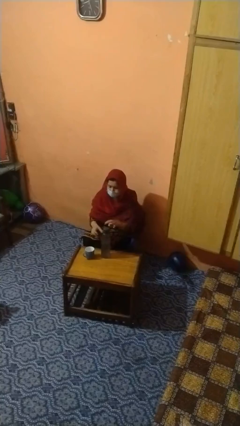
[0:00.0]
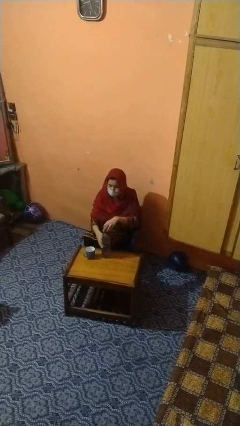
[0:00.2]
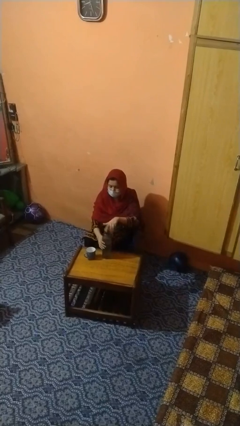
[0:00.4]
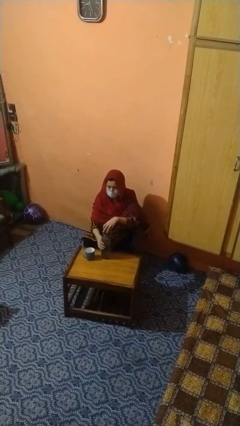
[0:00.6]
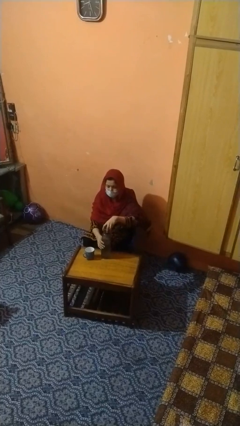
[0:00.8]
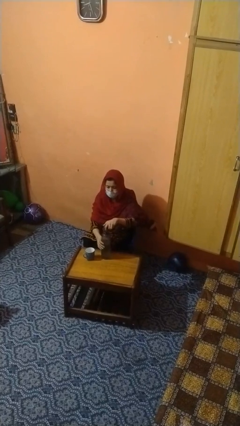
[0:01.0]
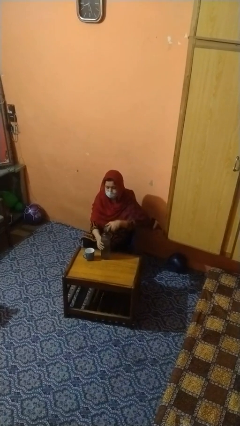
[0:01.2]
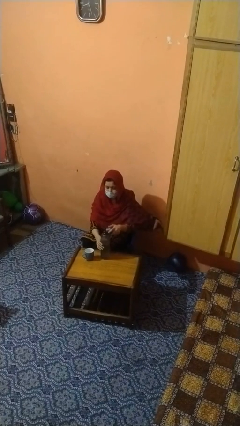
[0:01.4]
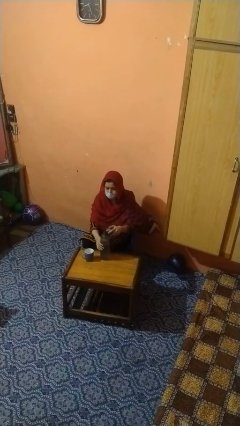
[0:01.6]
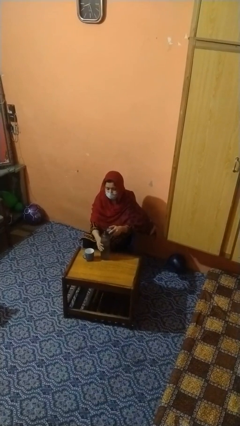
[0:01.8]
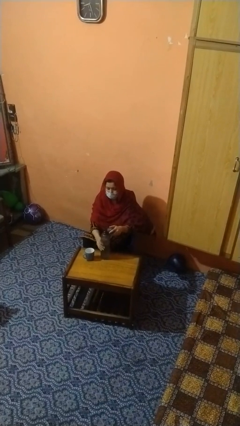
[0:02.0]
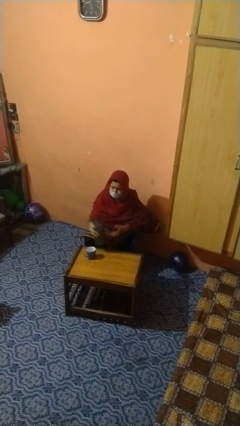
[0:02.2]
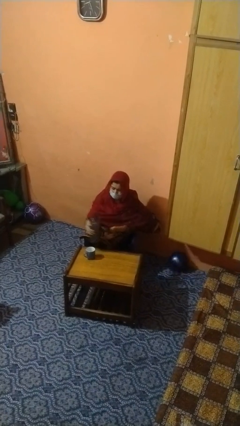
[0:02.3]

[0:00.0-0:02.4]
person unscrews lid from bottle

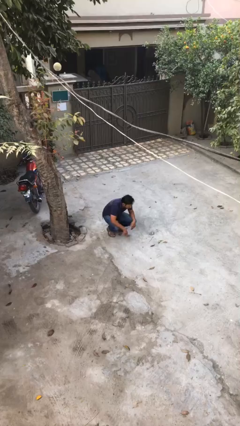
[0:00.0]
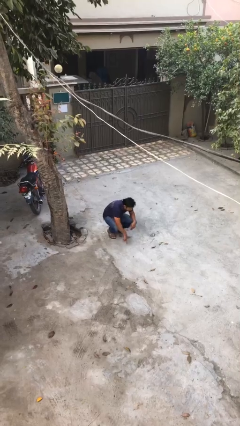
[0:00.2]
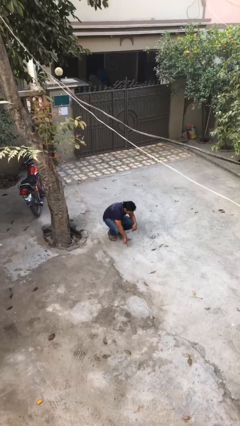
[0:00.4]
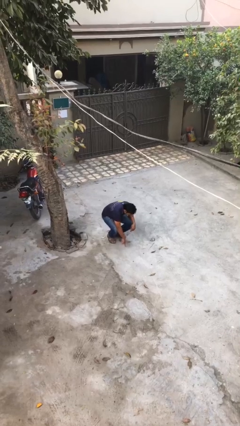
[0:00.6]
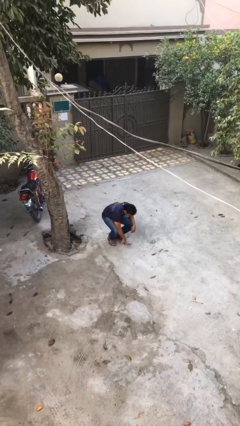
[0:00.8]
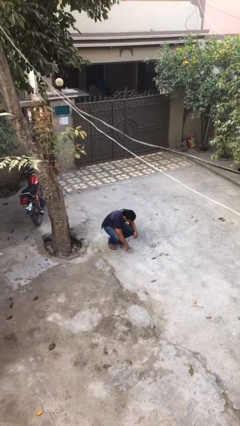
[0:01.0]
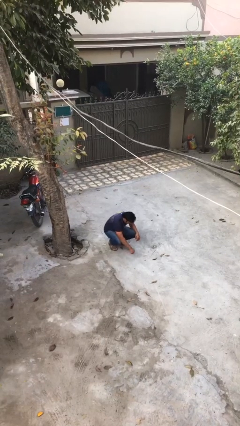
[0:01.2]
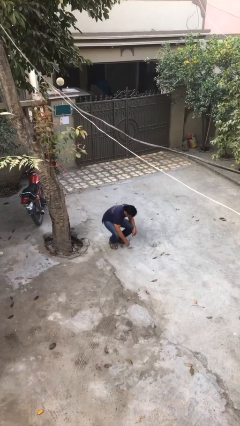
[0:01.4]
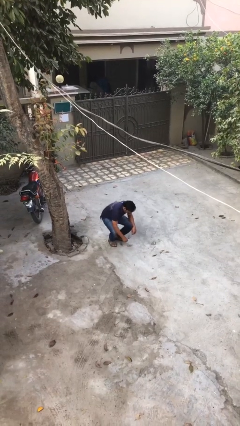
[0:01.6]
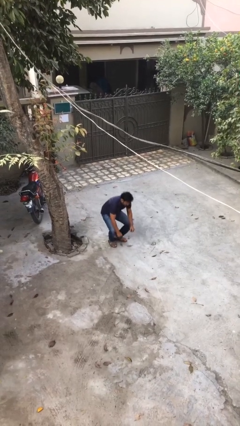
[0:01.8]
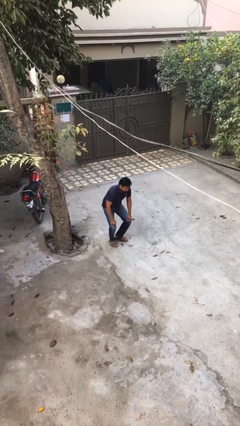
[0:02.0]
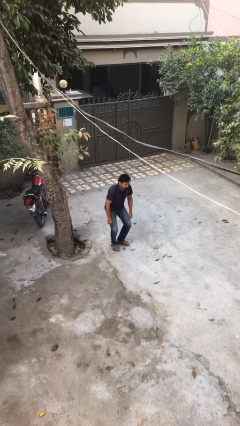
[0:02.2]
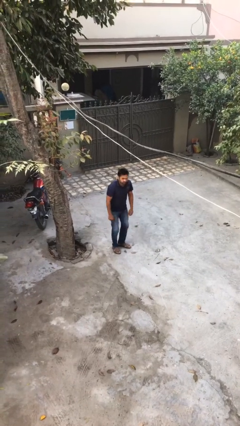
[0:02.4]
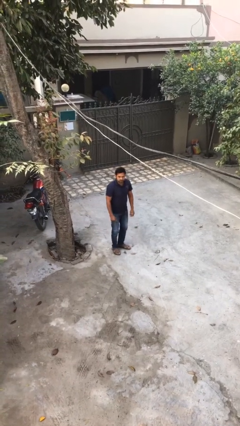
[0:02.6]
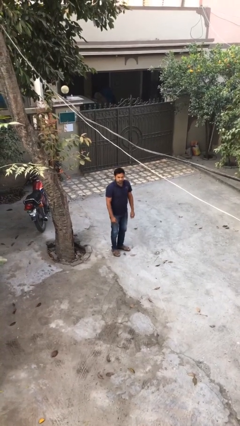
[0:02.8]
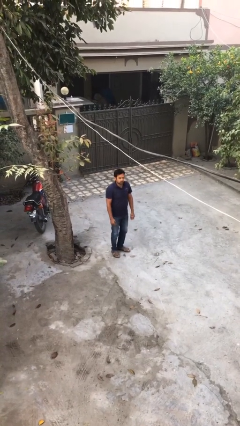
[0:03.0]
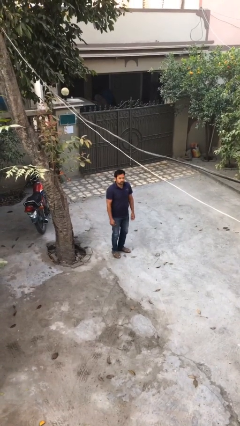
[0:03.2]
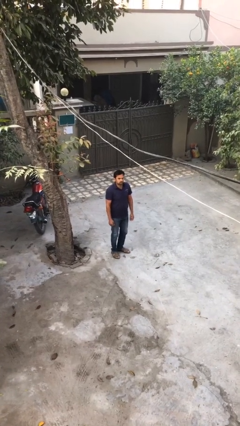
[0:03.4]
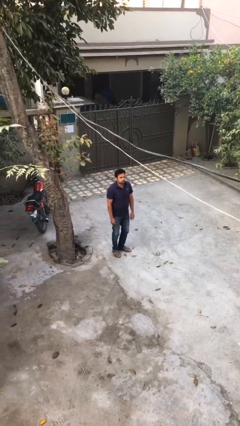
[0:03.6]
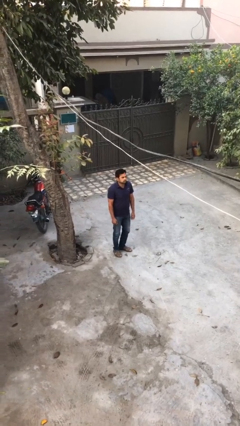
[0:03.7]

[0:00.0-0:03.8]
person stands up

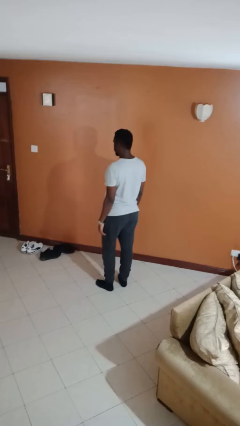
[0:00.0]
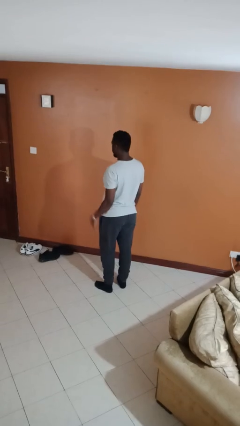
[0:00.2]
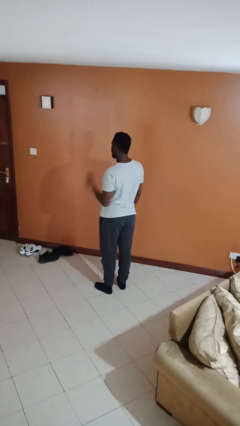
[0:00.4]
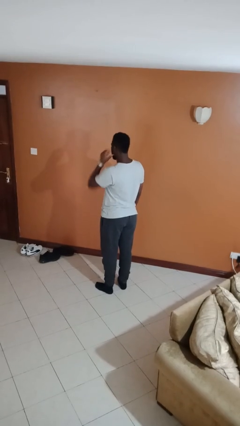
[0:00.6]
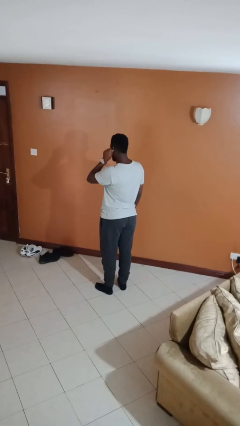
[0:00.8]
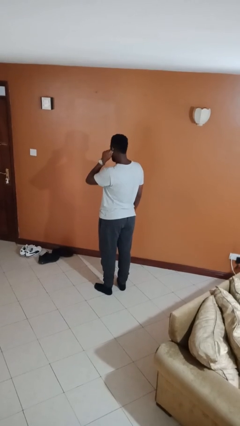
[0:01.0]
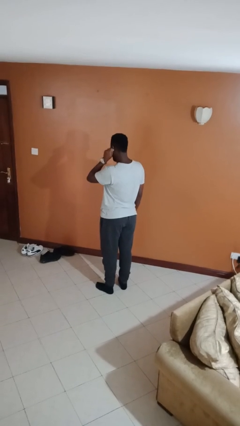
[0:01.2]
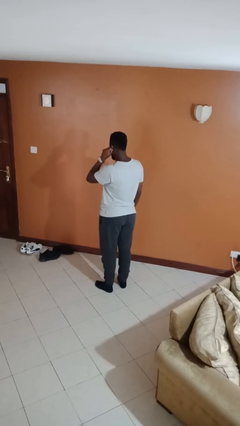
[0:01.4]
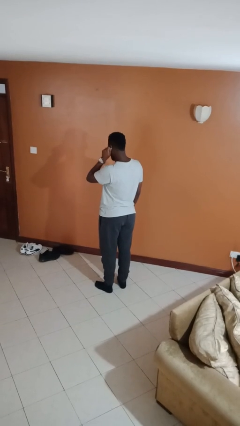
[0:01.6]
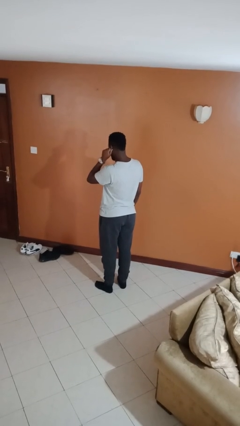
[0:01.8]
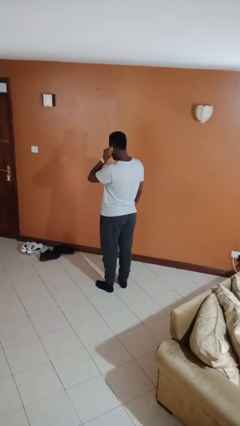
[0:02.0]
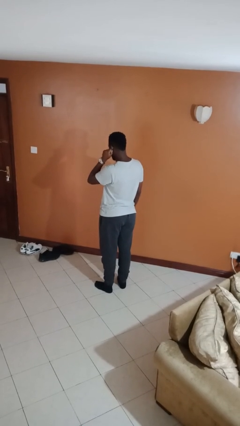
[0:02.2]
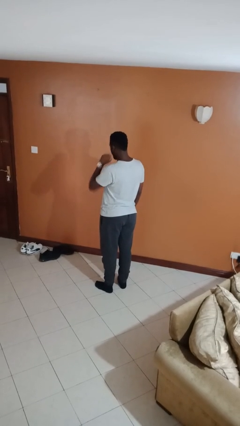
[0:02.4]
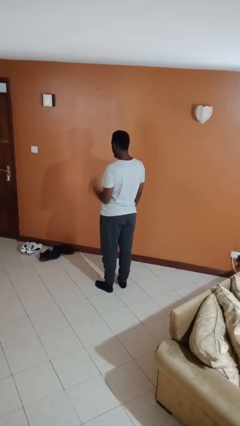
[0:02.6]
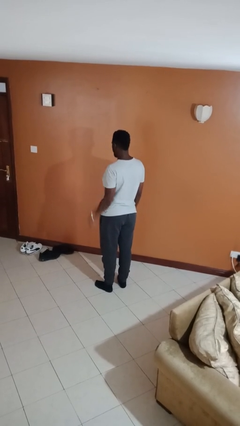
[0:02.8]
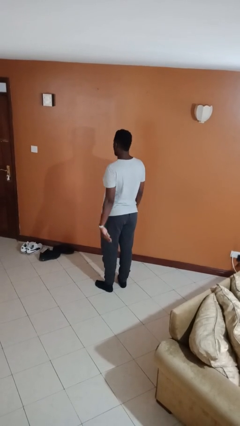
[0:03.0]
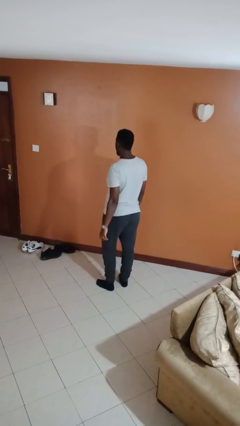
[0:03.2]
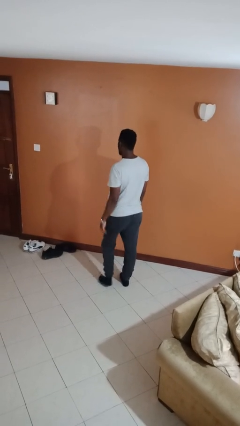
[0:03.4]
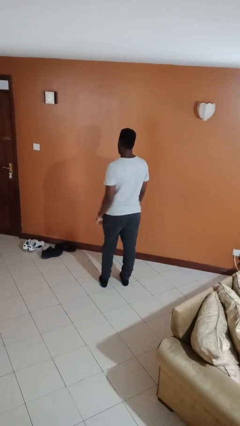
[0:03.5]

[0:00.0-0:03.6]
person touches earlobe

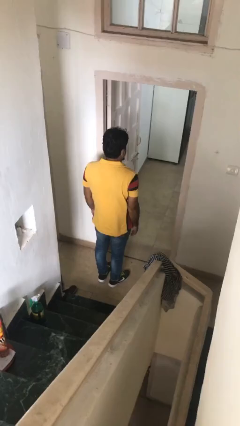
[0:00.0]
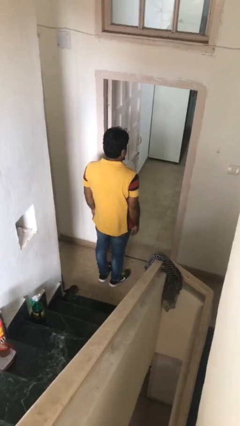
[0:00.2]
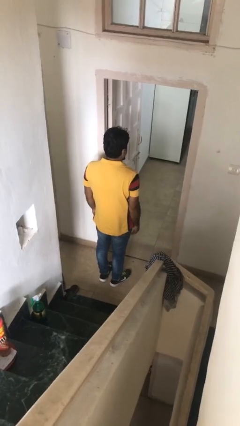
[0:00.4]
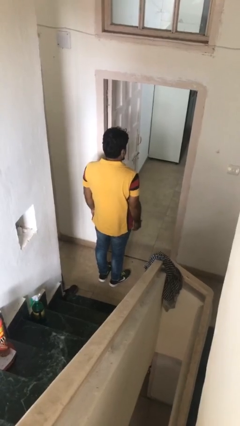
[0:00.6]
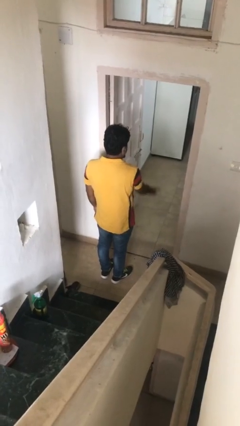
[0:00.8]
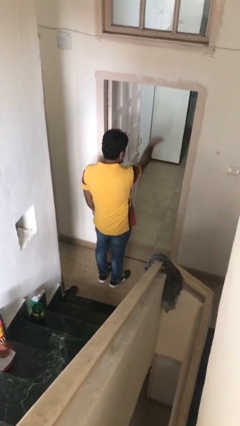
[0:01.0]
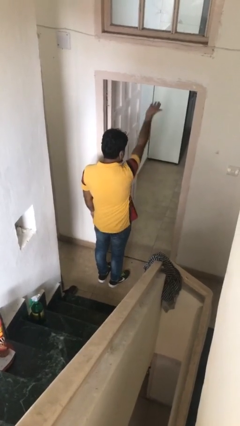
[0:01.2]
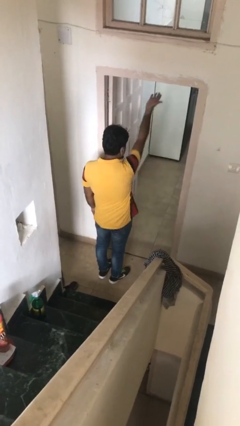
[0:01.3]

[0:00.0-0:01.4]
person gestures swipe up

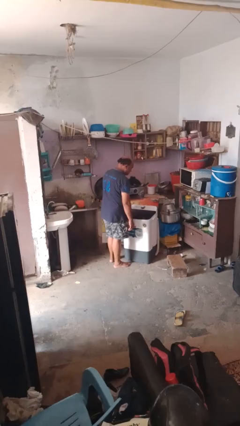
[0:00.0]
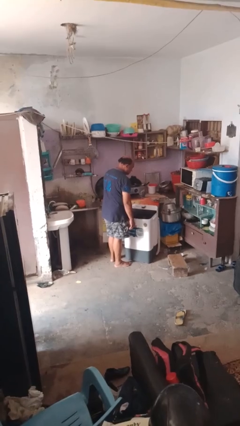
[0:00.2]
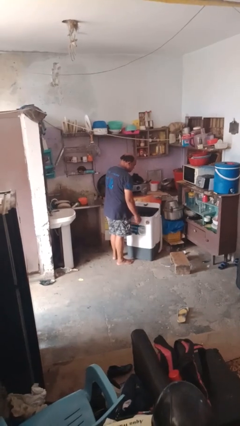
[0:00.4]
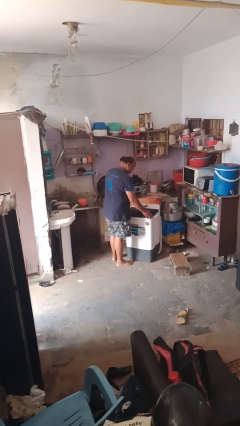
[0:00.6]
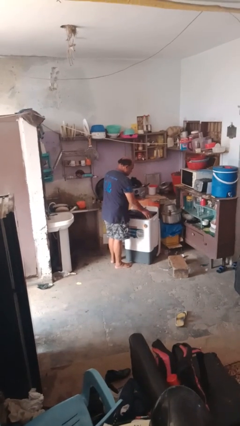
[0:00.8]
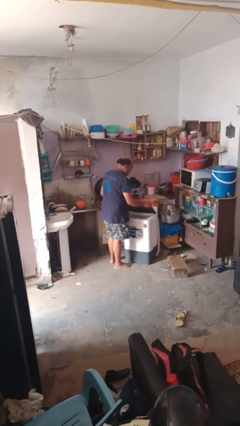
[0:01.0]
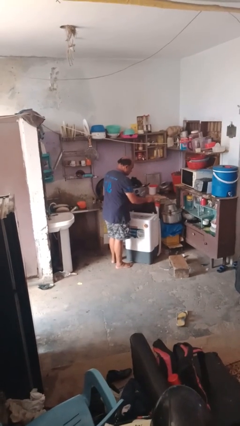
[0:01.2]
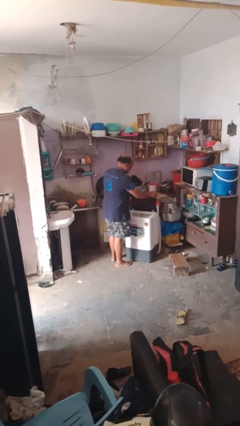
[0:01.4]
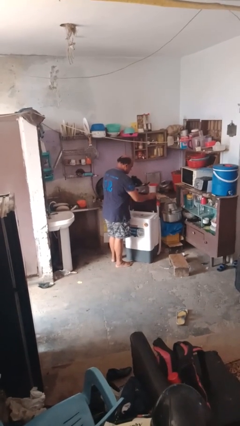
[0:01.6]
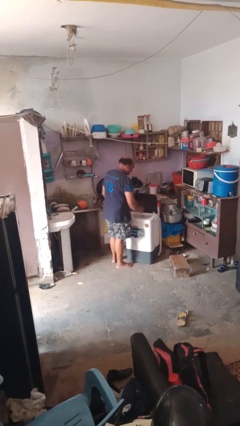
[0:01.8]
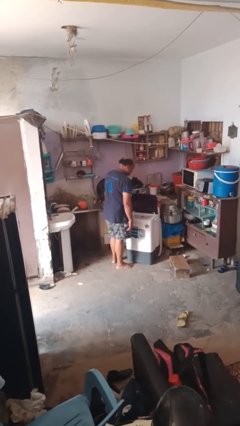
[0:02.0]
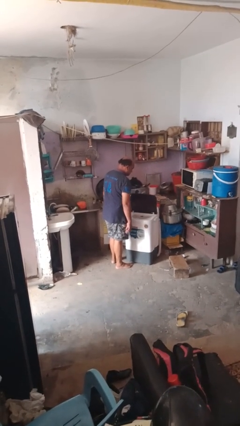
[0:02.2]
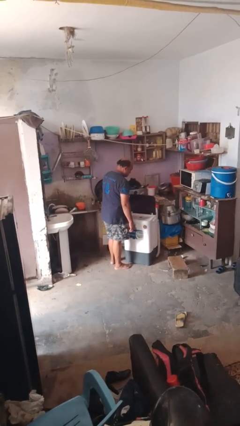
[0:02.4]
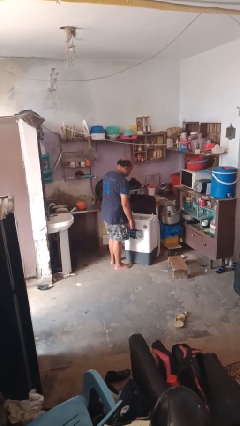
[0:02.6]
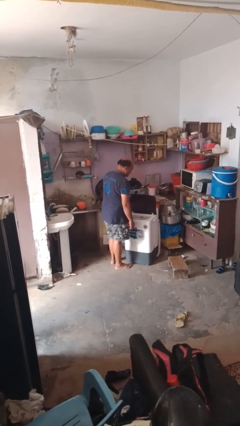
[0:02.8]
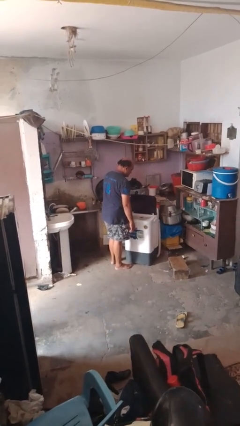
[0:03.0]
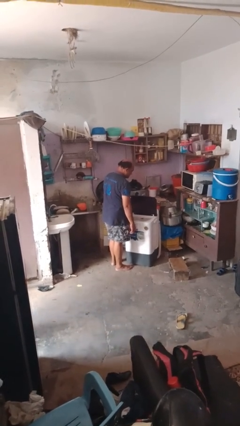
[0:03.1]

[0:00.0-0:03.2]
person opens clothes washer

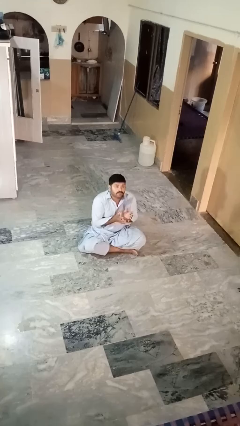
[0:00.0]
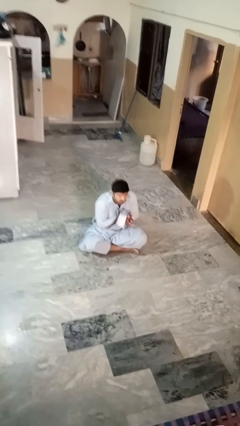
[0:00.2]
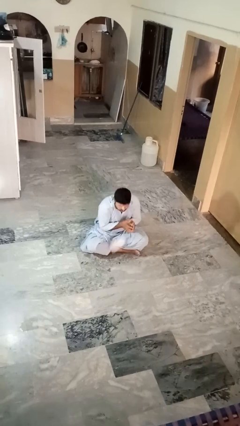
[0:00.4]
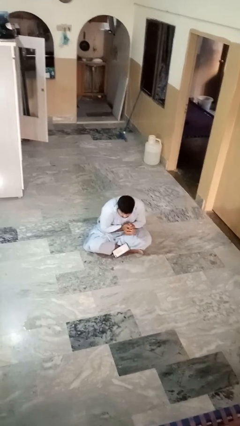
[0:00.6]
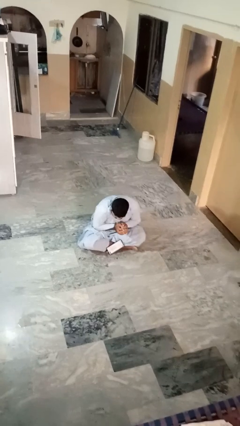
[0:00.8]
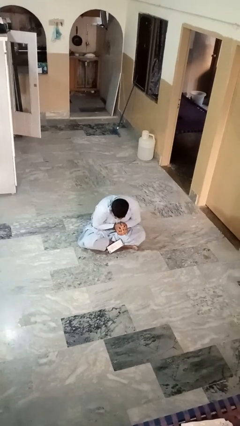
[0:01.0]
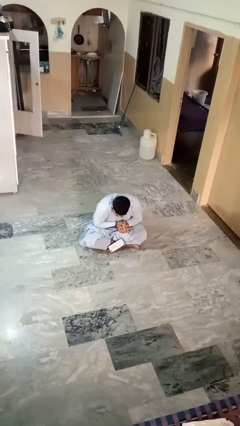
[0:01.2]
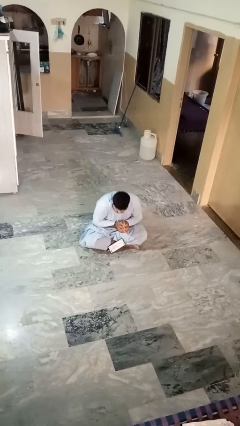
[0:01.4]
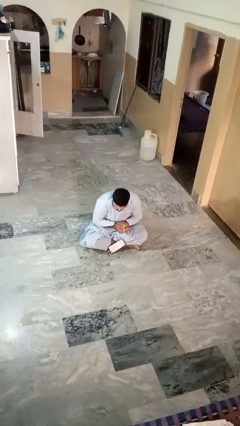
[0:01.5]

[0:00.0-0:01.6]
person catches dropped object

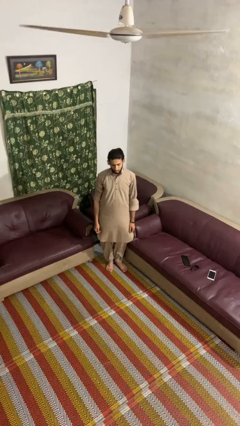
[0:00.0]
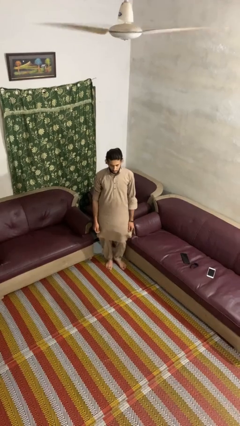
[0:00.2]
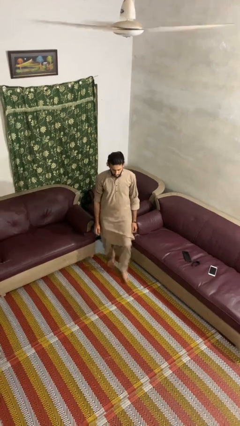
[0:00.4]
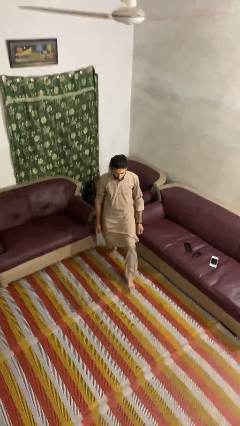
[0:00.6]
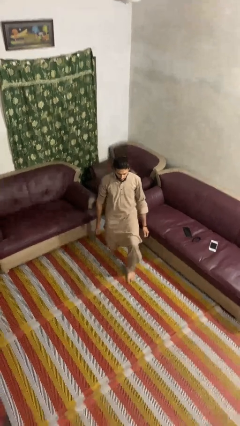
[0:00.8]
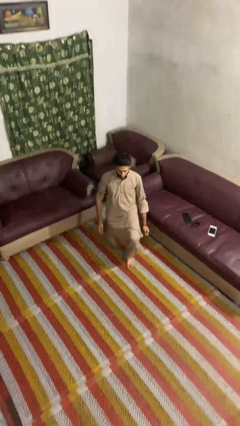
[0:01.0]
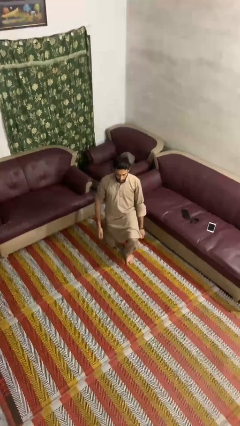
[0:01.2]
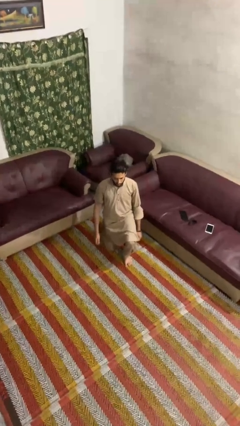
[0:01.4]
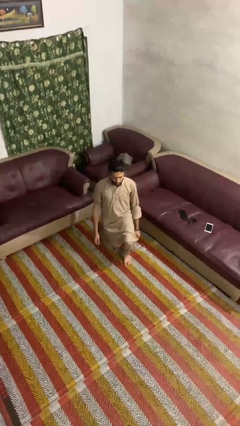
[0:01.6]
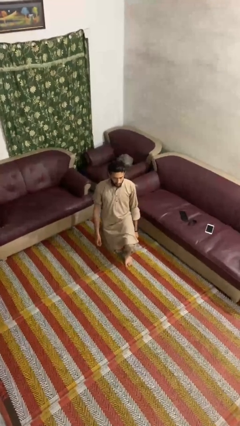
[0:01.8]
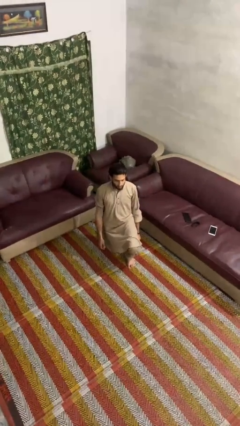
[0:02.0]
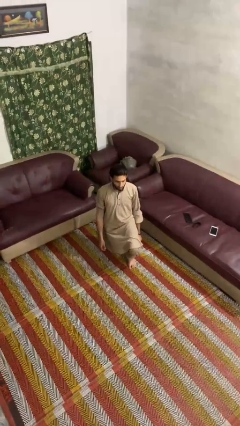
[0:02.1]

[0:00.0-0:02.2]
person kneels
